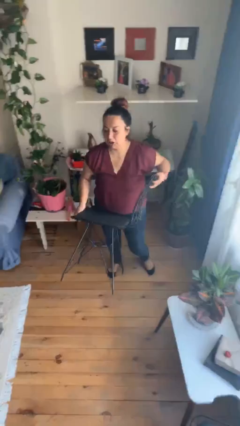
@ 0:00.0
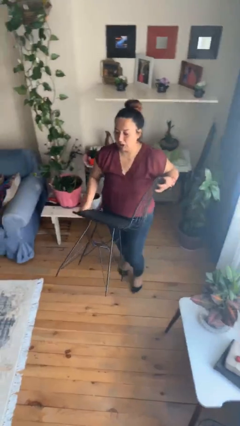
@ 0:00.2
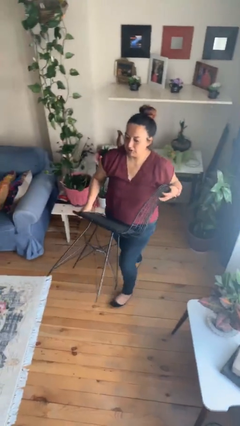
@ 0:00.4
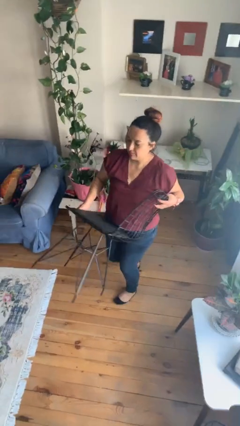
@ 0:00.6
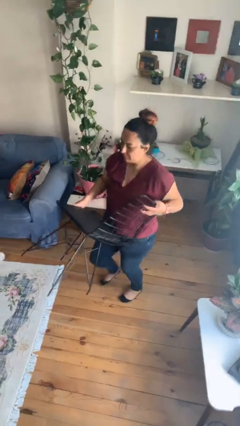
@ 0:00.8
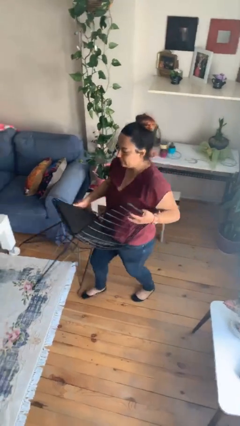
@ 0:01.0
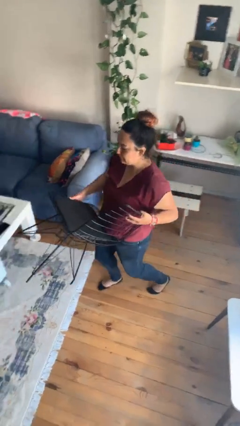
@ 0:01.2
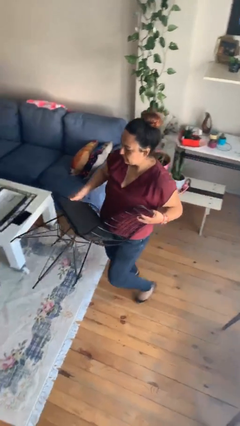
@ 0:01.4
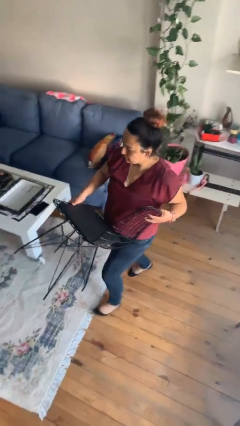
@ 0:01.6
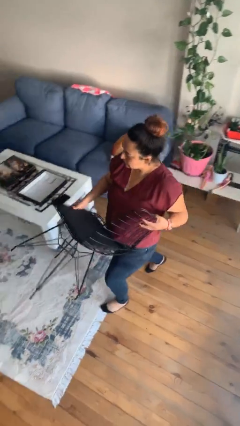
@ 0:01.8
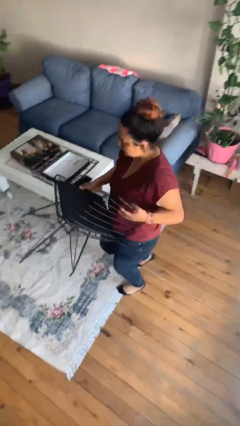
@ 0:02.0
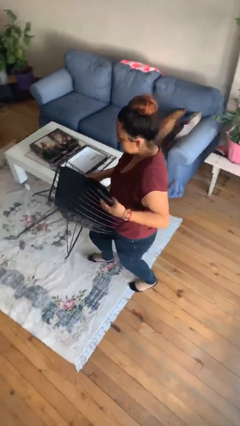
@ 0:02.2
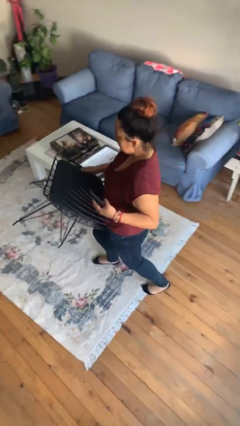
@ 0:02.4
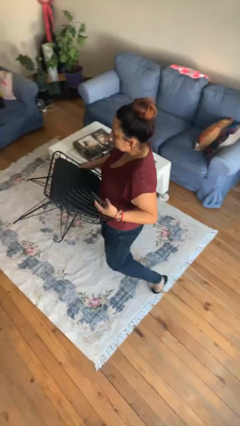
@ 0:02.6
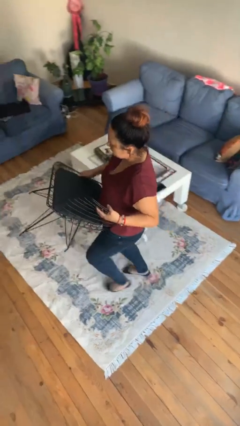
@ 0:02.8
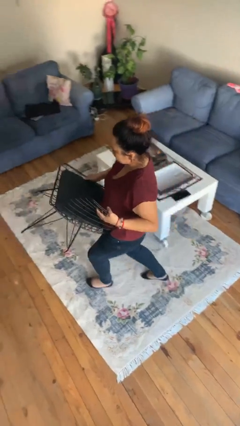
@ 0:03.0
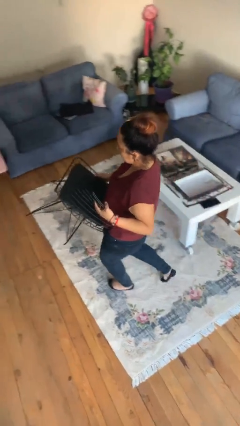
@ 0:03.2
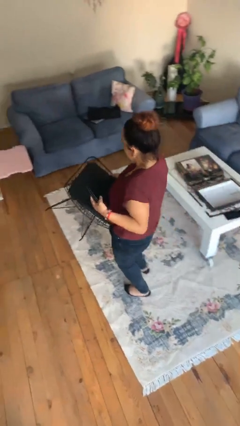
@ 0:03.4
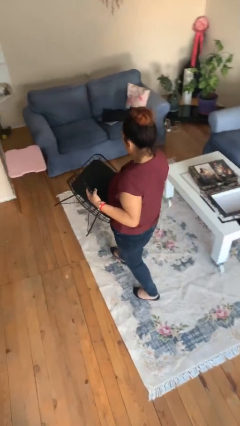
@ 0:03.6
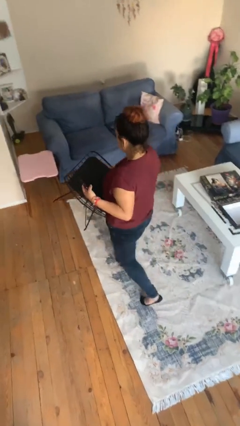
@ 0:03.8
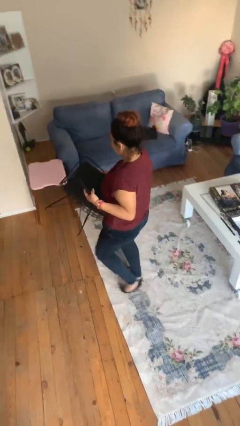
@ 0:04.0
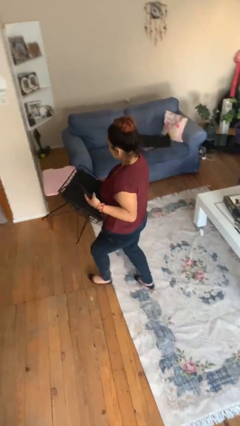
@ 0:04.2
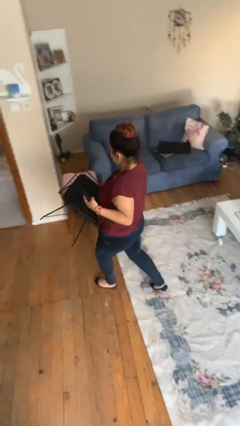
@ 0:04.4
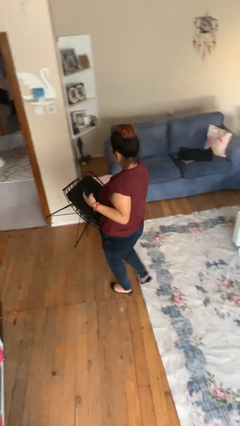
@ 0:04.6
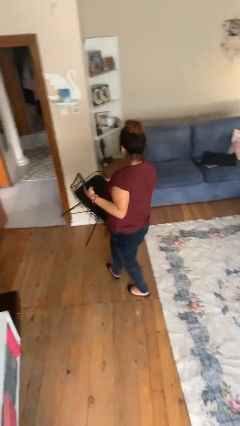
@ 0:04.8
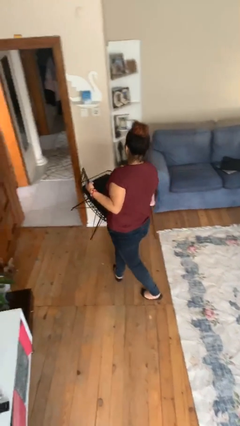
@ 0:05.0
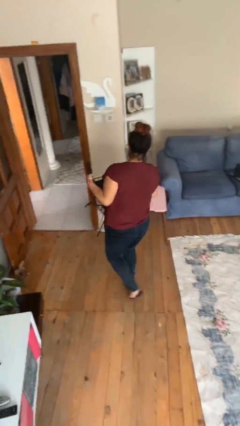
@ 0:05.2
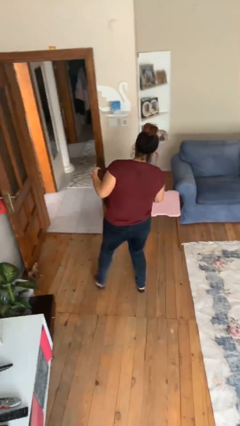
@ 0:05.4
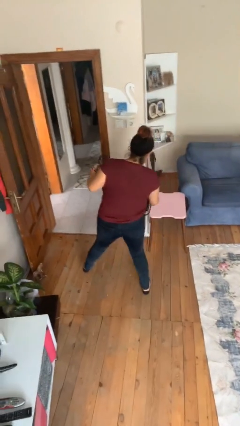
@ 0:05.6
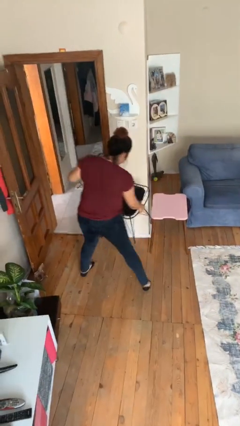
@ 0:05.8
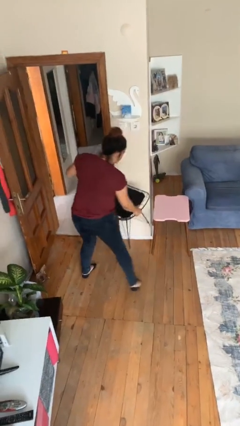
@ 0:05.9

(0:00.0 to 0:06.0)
person carries heavy object

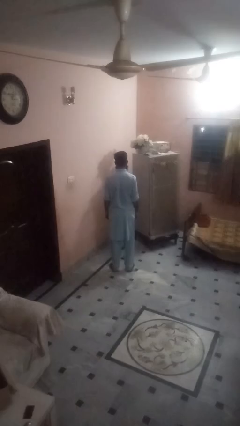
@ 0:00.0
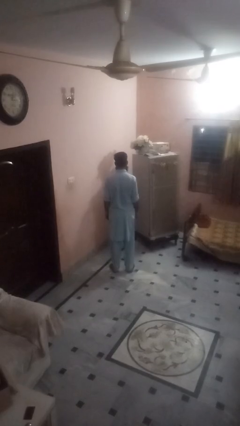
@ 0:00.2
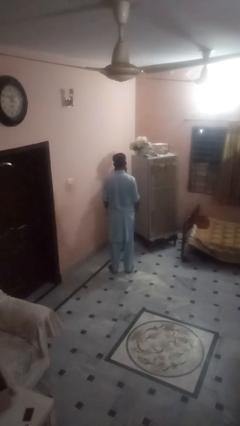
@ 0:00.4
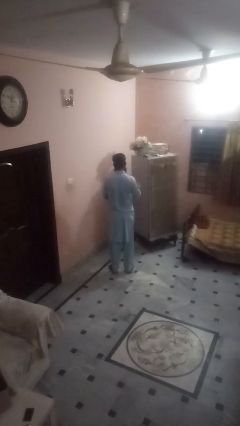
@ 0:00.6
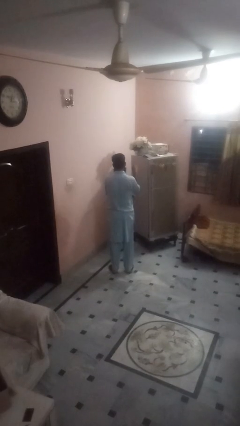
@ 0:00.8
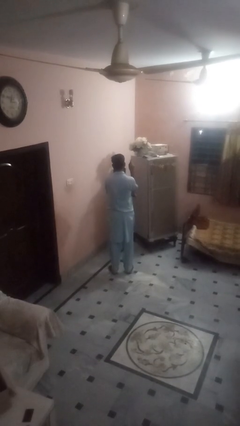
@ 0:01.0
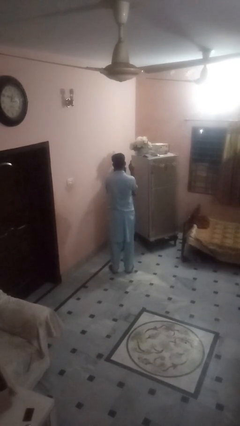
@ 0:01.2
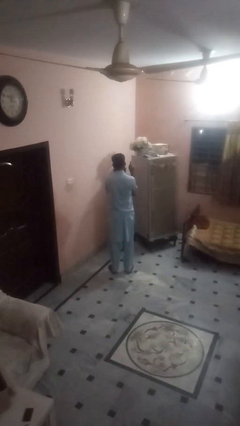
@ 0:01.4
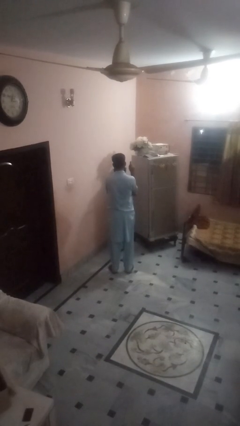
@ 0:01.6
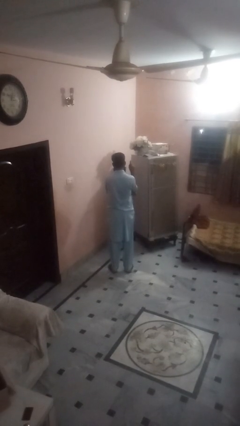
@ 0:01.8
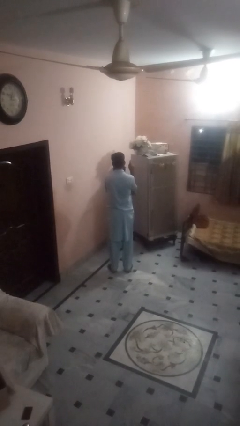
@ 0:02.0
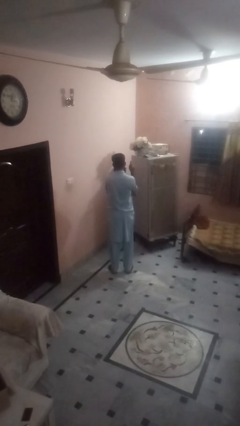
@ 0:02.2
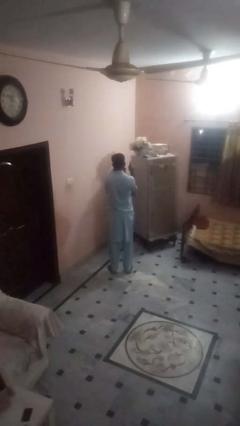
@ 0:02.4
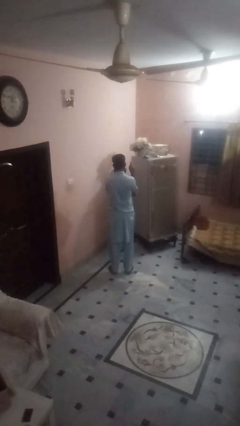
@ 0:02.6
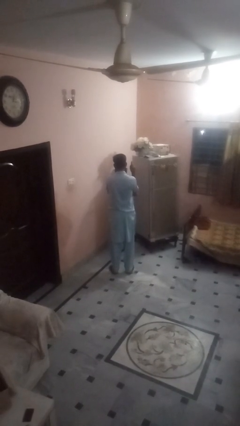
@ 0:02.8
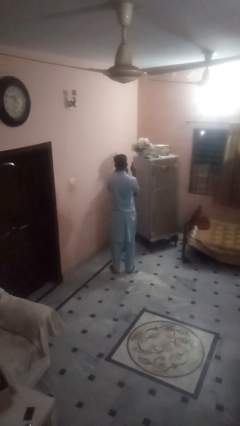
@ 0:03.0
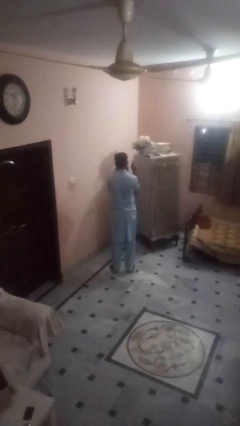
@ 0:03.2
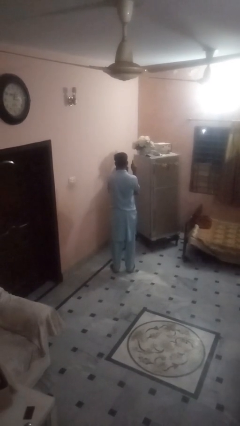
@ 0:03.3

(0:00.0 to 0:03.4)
person gestures number one

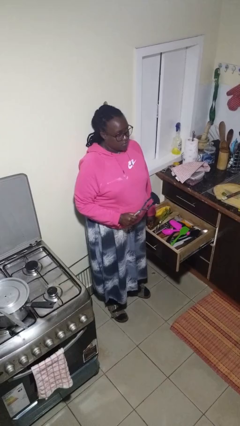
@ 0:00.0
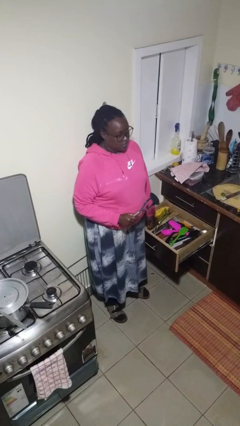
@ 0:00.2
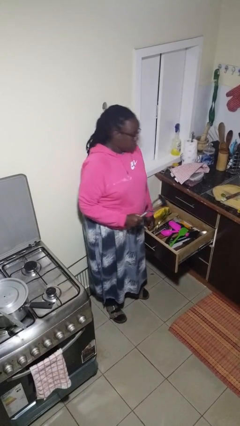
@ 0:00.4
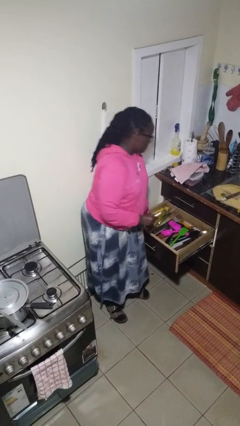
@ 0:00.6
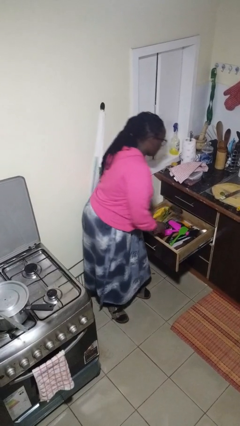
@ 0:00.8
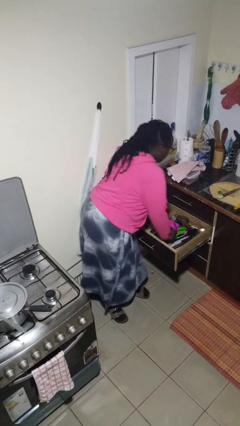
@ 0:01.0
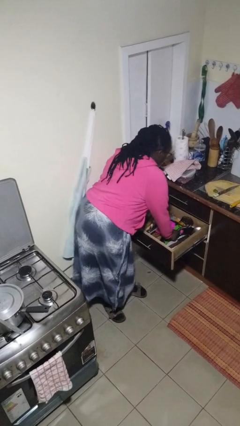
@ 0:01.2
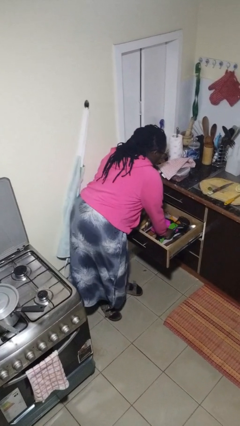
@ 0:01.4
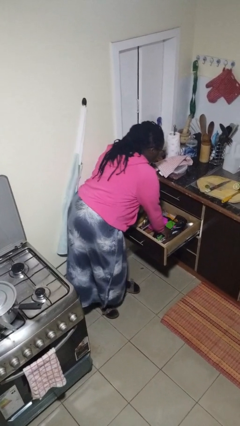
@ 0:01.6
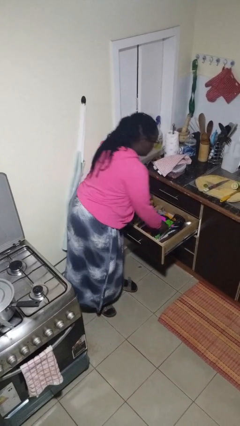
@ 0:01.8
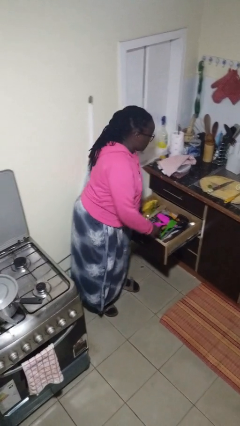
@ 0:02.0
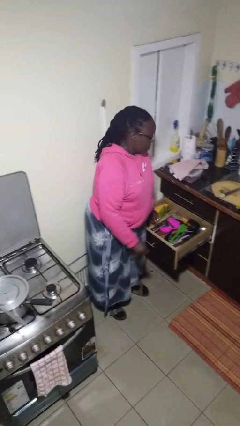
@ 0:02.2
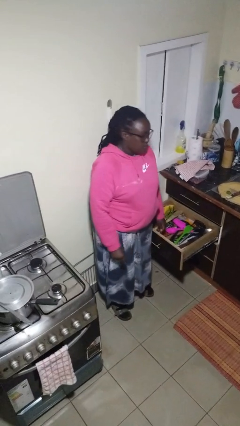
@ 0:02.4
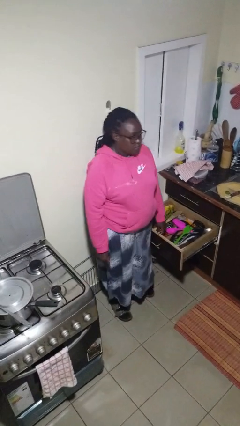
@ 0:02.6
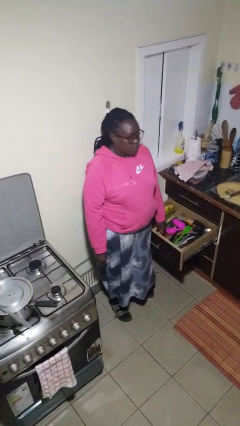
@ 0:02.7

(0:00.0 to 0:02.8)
person puts object into kitchen drawer

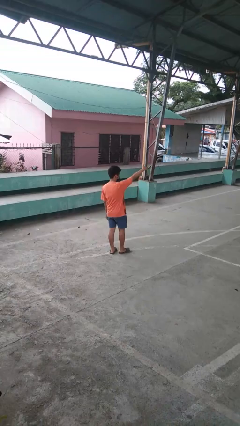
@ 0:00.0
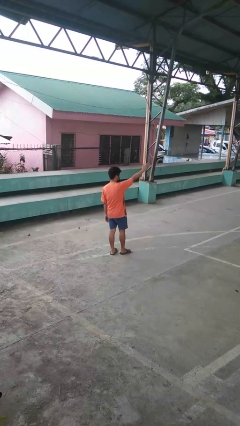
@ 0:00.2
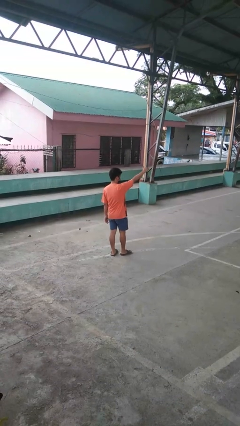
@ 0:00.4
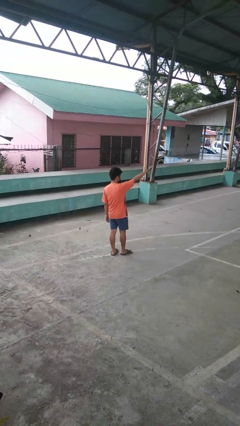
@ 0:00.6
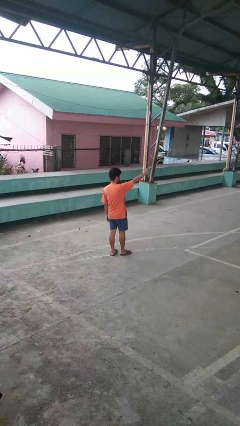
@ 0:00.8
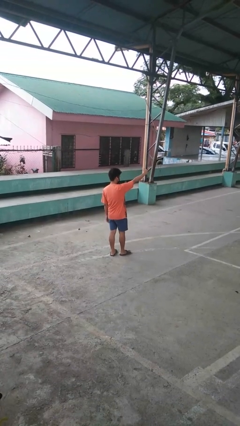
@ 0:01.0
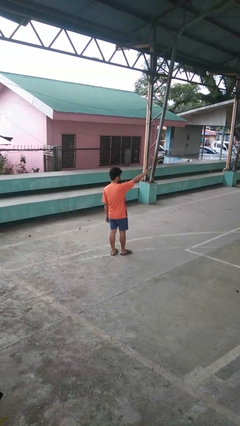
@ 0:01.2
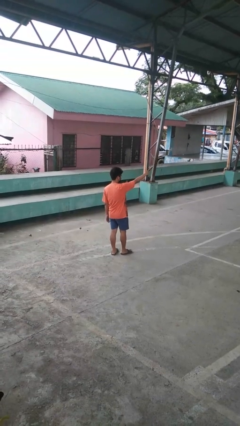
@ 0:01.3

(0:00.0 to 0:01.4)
person gestures come here

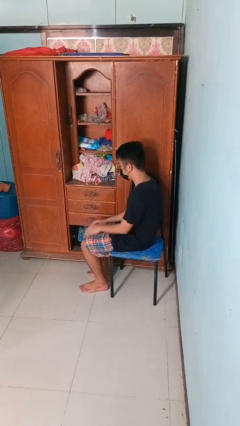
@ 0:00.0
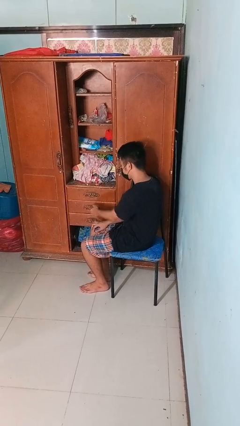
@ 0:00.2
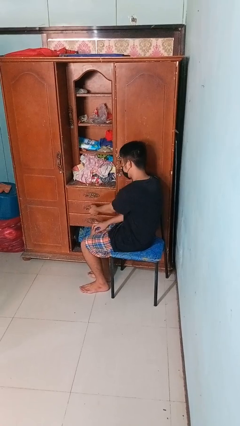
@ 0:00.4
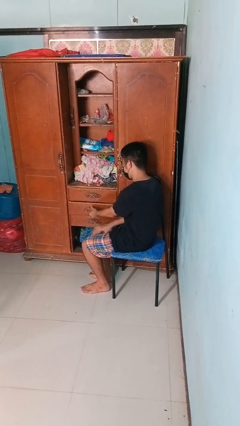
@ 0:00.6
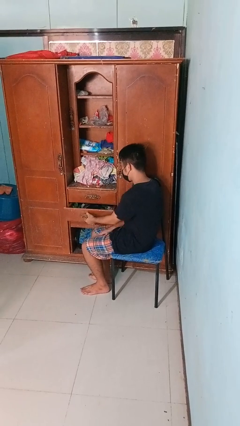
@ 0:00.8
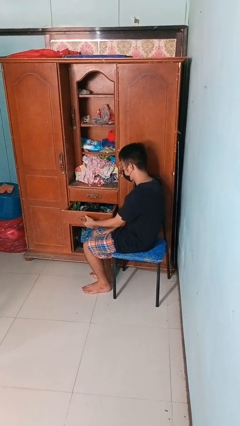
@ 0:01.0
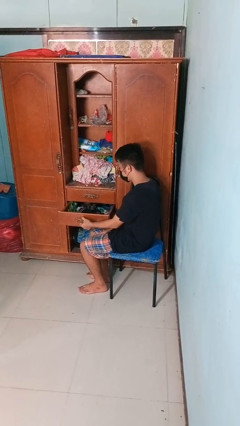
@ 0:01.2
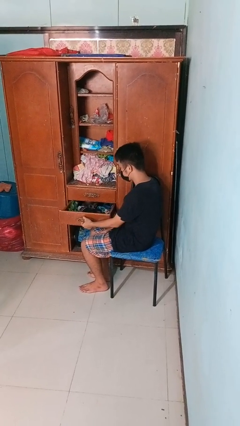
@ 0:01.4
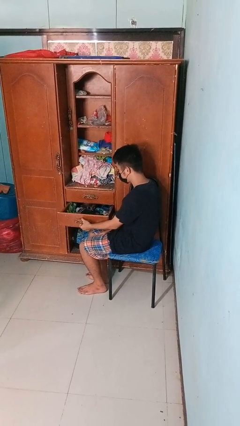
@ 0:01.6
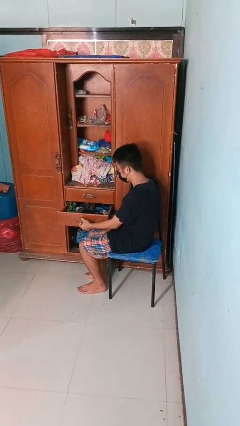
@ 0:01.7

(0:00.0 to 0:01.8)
person opens dresser drawer

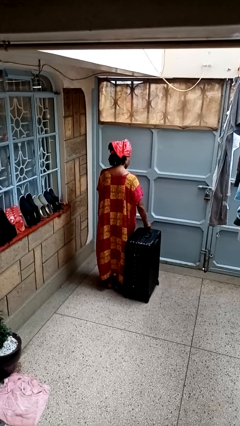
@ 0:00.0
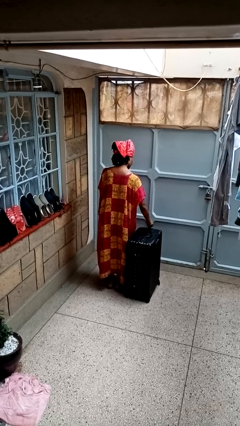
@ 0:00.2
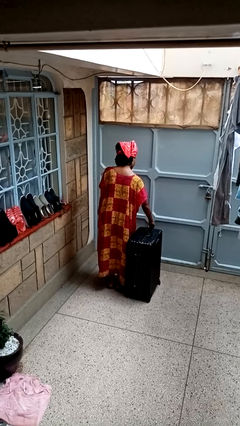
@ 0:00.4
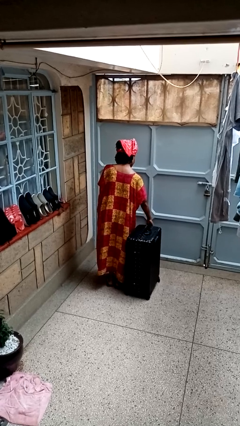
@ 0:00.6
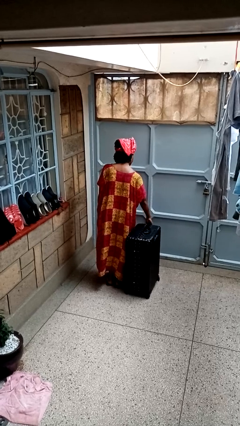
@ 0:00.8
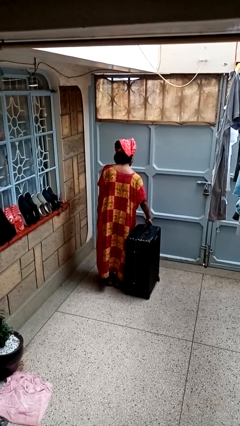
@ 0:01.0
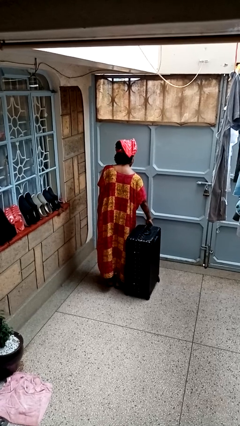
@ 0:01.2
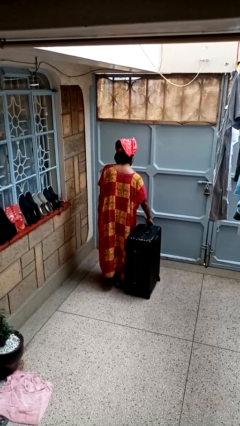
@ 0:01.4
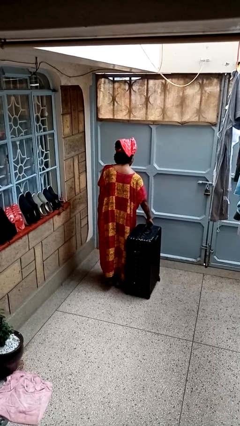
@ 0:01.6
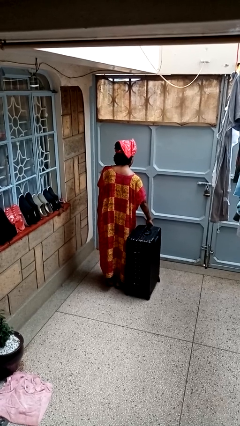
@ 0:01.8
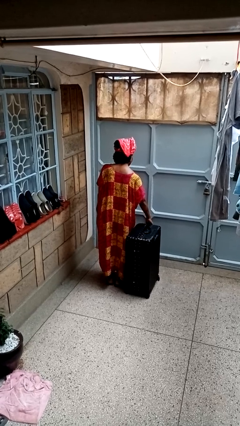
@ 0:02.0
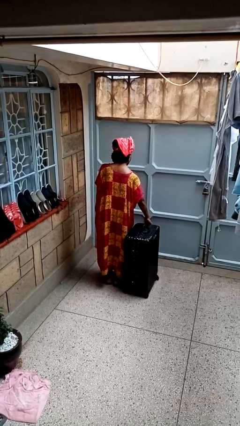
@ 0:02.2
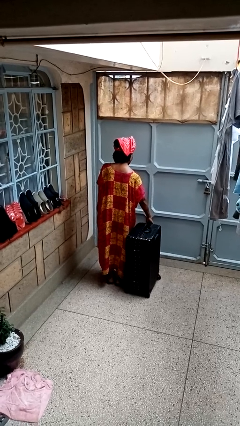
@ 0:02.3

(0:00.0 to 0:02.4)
person closes suitcase
